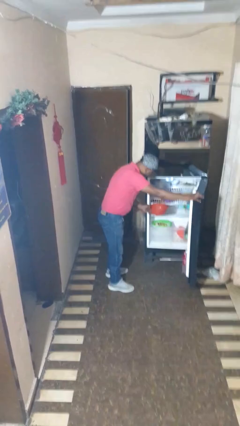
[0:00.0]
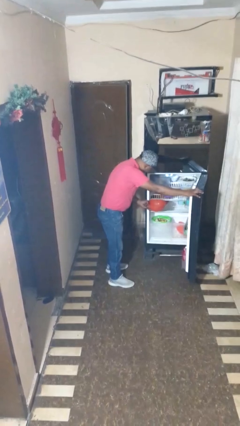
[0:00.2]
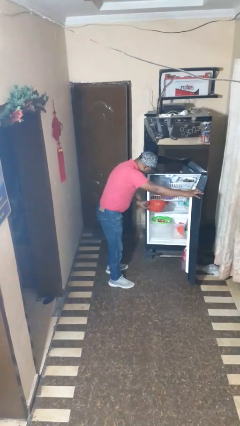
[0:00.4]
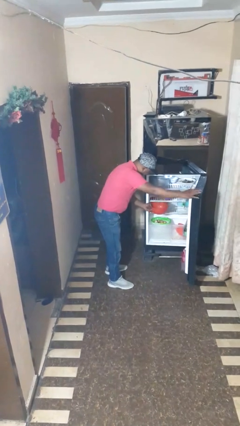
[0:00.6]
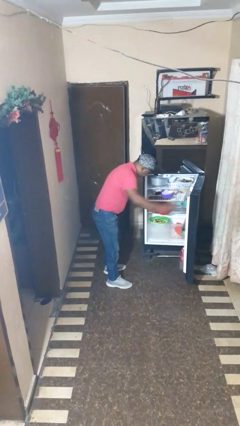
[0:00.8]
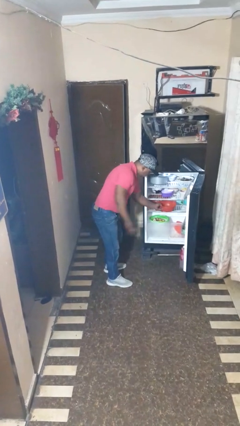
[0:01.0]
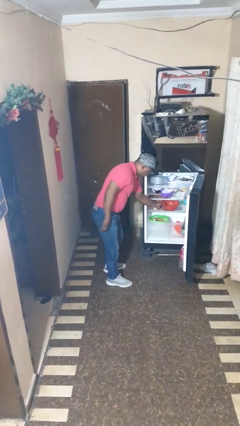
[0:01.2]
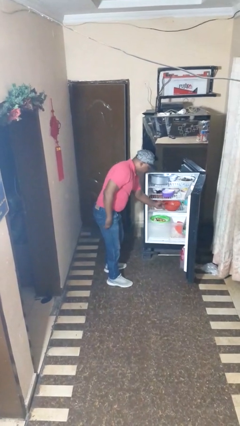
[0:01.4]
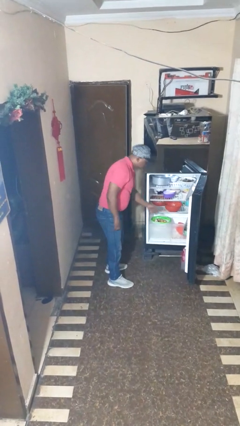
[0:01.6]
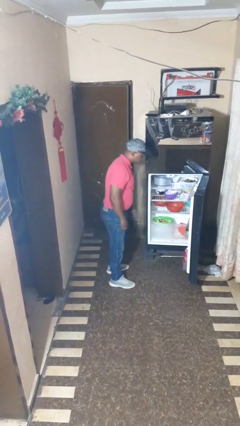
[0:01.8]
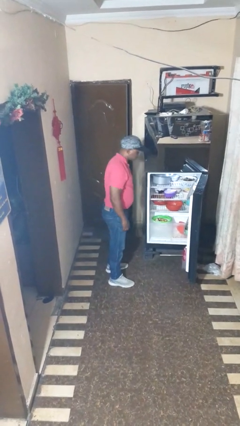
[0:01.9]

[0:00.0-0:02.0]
person puts object into refrigerator

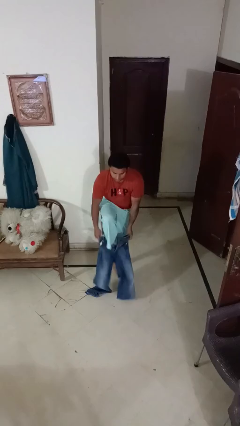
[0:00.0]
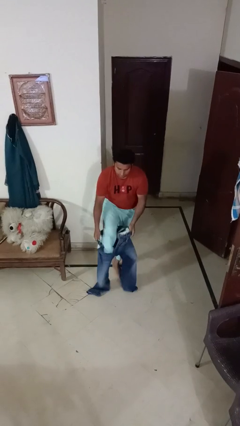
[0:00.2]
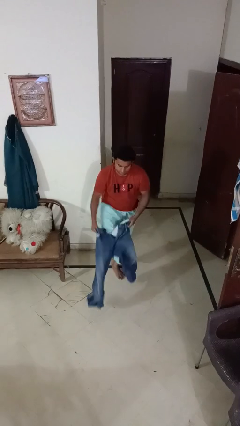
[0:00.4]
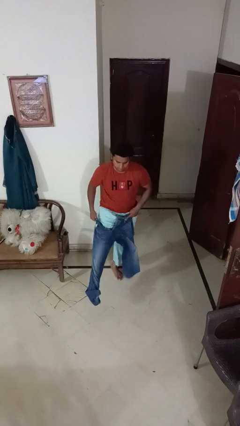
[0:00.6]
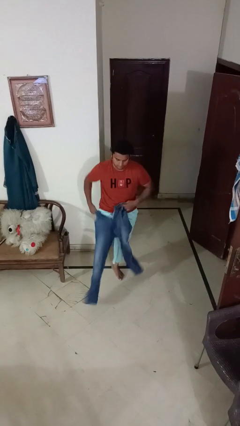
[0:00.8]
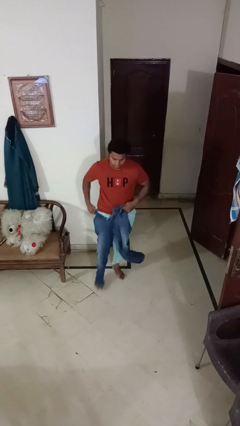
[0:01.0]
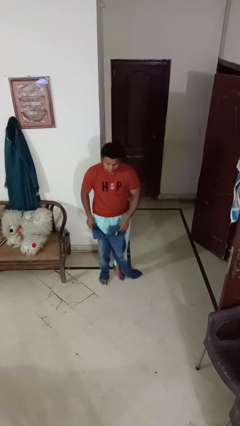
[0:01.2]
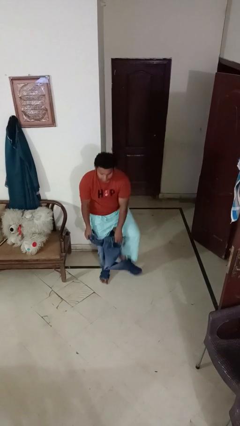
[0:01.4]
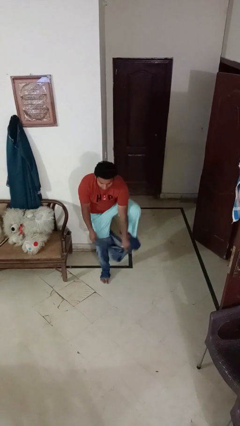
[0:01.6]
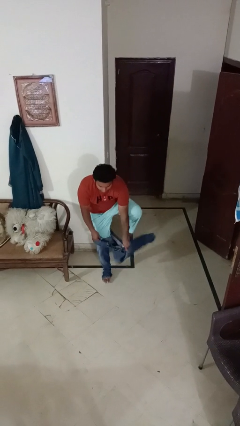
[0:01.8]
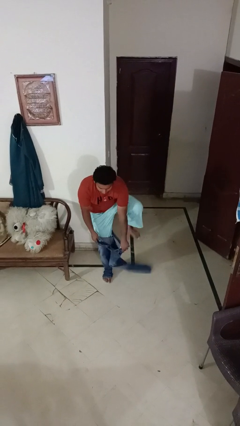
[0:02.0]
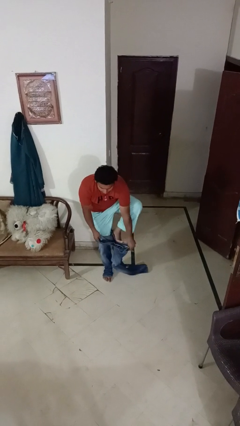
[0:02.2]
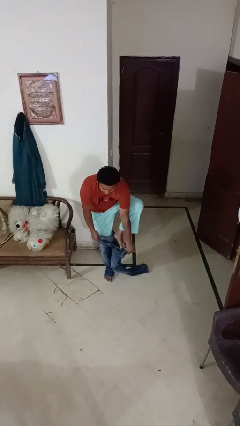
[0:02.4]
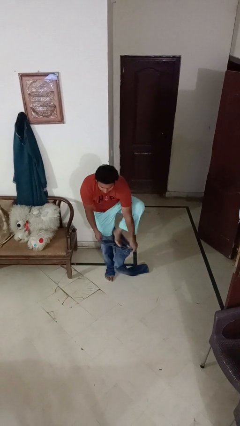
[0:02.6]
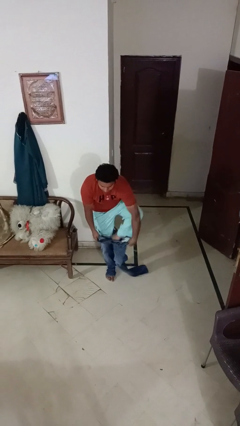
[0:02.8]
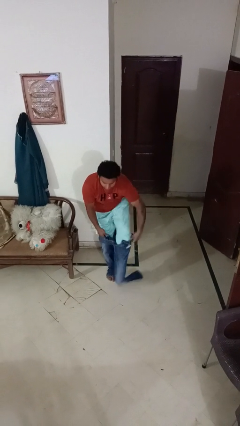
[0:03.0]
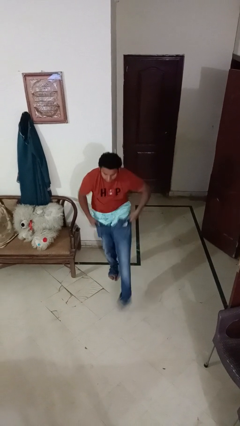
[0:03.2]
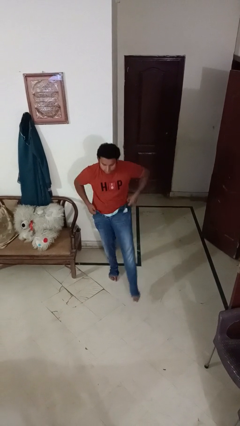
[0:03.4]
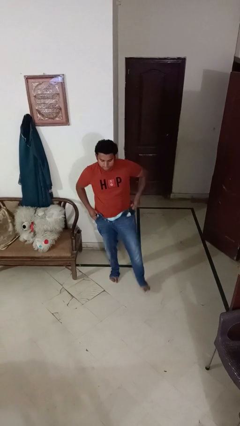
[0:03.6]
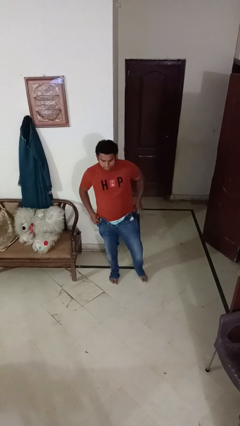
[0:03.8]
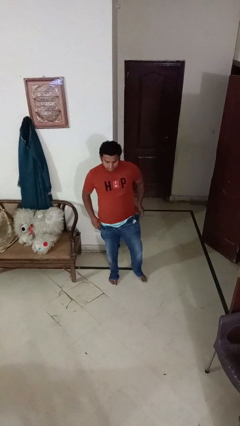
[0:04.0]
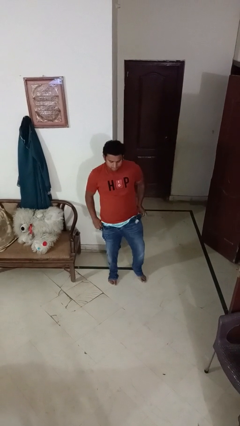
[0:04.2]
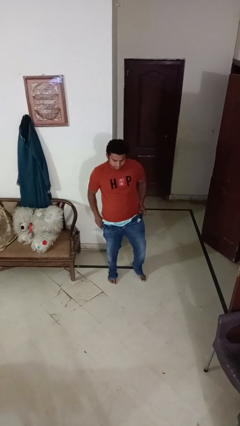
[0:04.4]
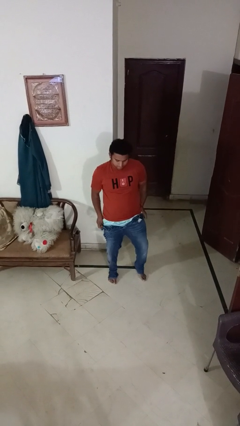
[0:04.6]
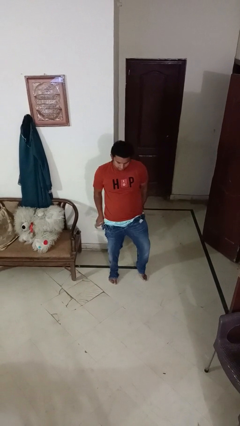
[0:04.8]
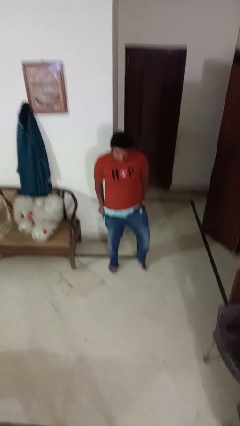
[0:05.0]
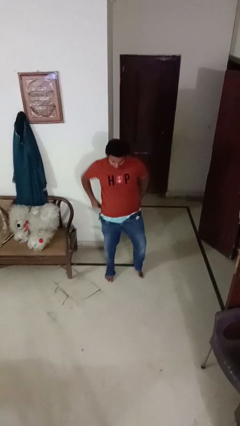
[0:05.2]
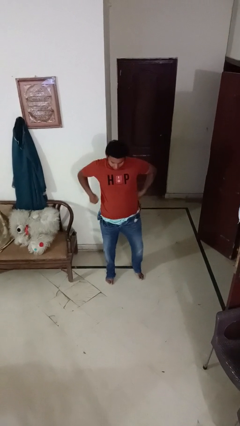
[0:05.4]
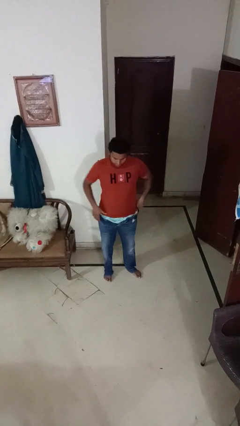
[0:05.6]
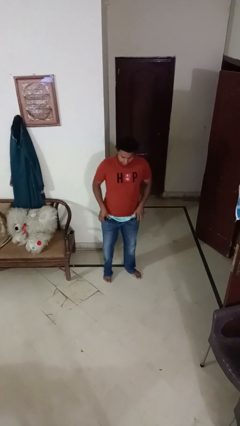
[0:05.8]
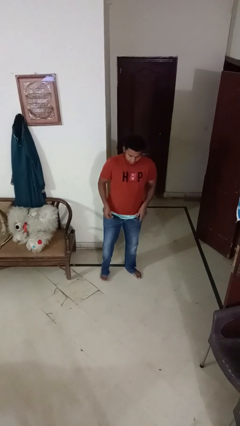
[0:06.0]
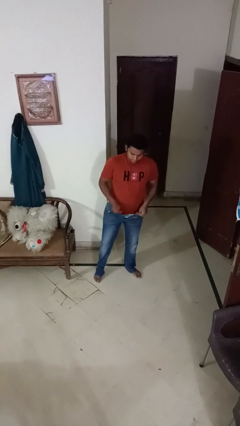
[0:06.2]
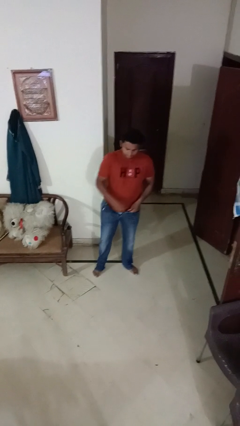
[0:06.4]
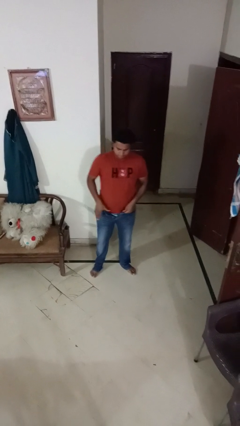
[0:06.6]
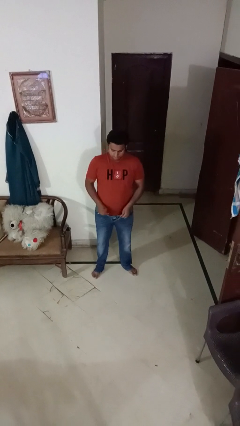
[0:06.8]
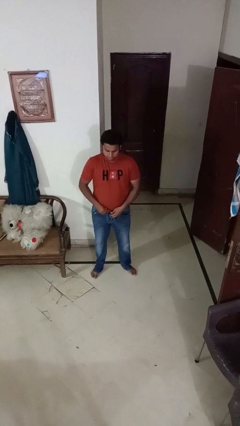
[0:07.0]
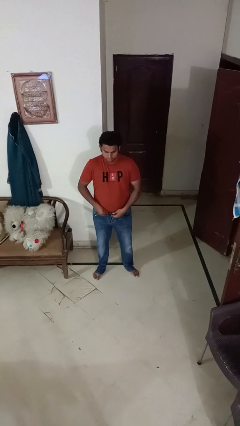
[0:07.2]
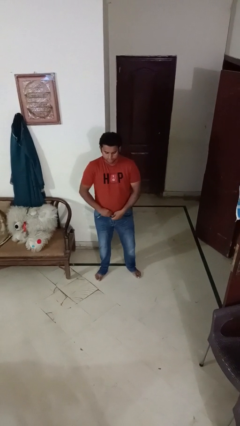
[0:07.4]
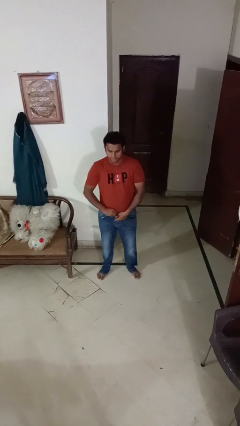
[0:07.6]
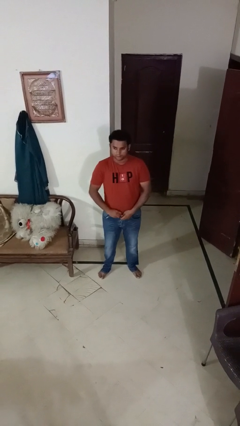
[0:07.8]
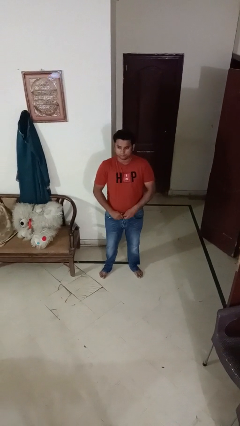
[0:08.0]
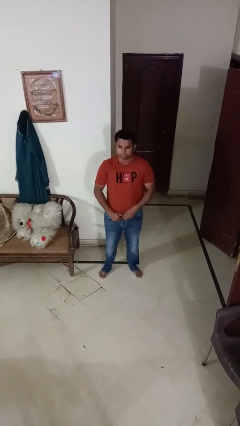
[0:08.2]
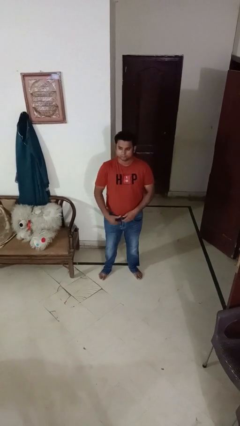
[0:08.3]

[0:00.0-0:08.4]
person puts on pants

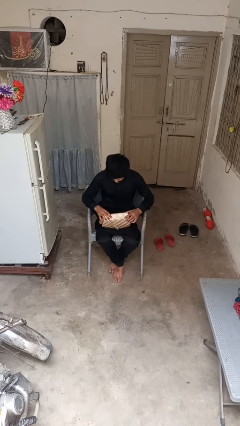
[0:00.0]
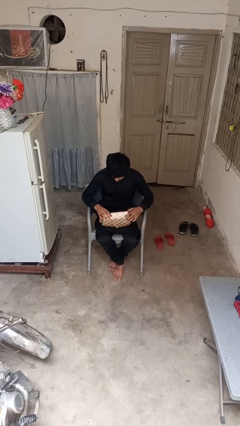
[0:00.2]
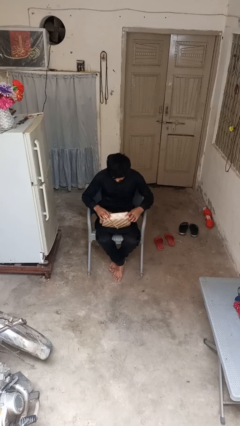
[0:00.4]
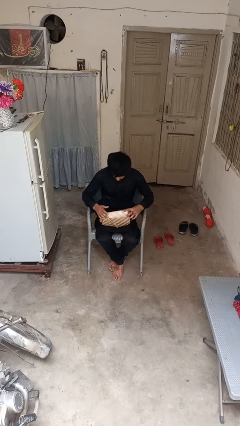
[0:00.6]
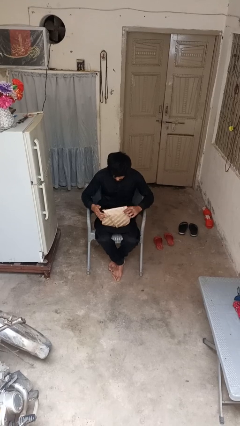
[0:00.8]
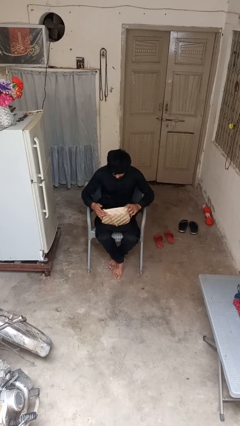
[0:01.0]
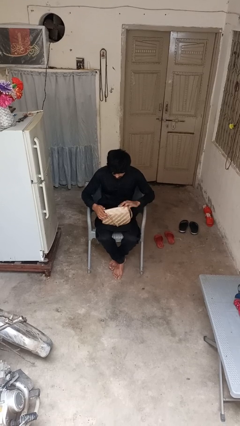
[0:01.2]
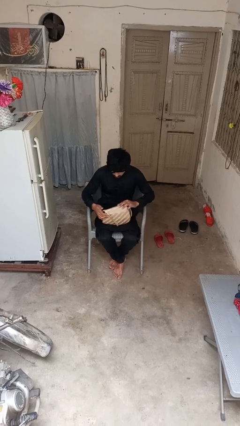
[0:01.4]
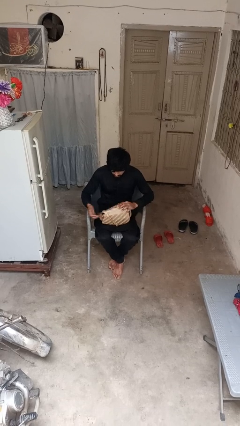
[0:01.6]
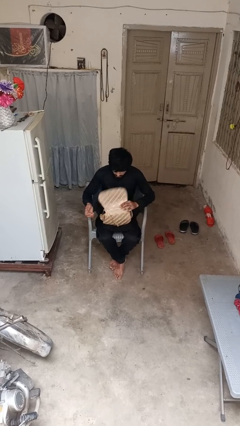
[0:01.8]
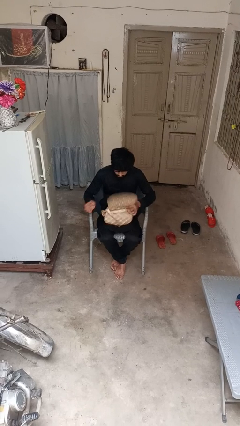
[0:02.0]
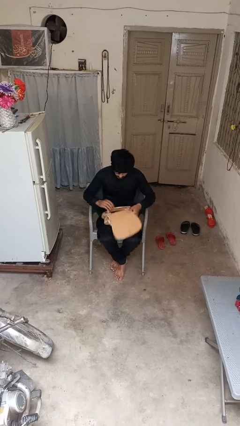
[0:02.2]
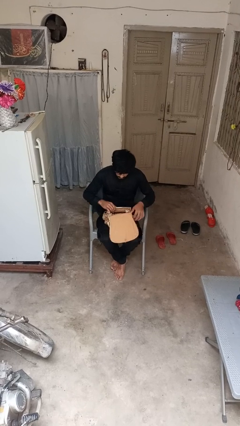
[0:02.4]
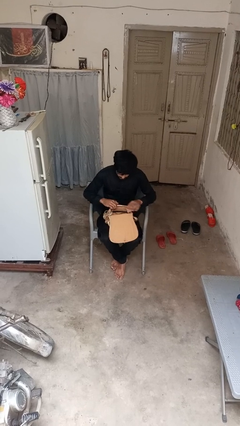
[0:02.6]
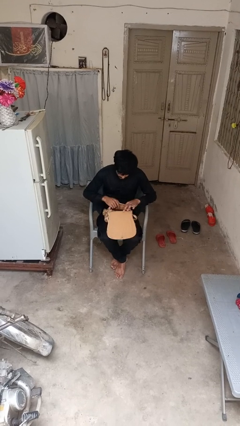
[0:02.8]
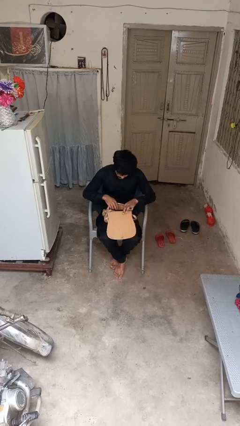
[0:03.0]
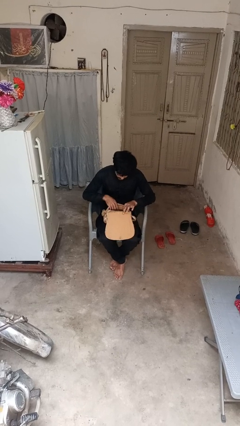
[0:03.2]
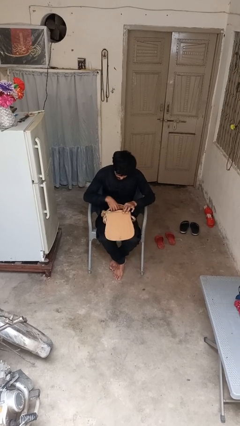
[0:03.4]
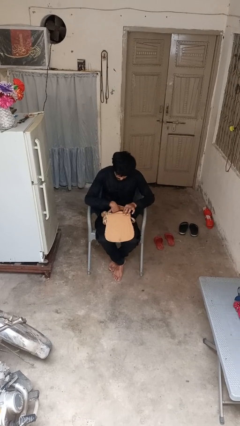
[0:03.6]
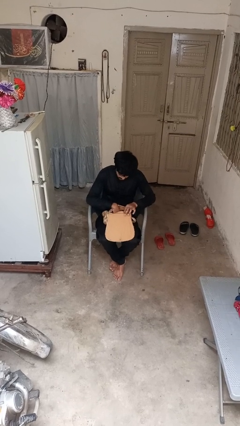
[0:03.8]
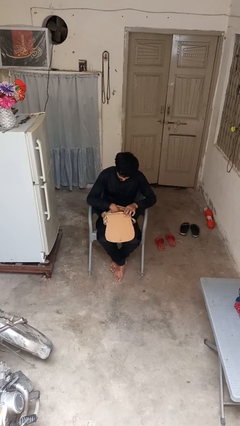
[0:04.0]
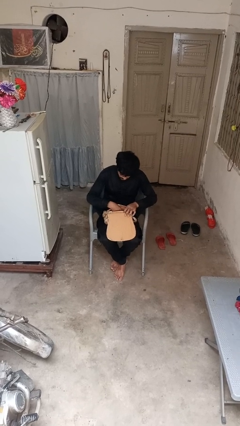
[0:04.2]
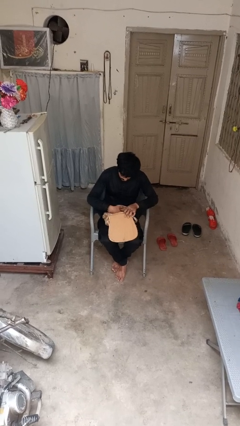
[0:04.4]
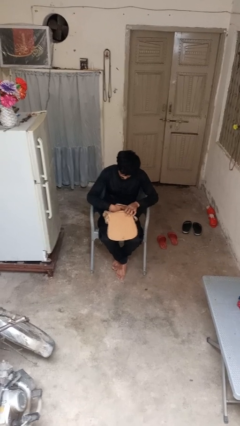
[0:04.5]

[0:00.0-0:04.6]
person searches in purse

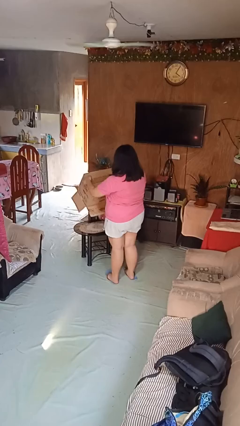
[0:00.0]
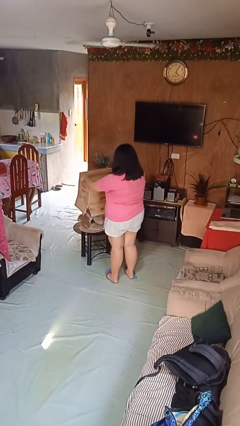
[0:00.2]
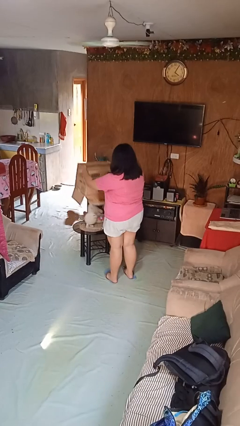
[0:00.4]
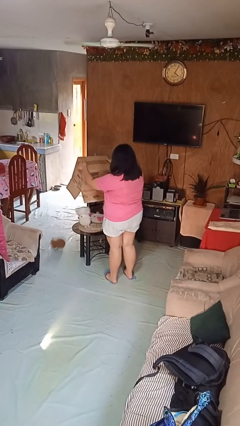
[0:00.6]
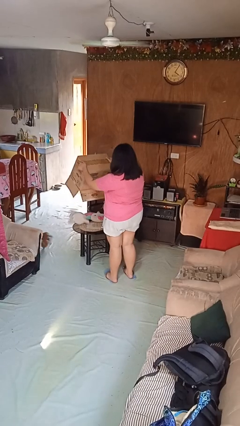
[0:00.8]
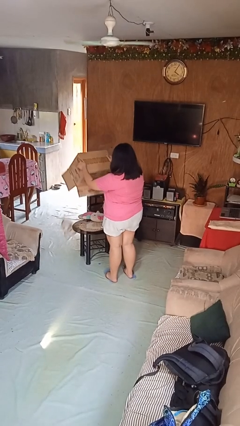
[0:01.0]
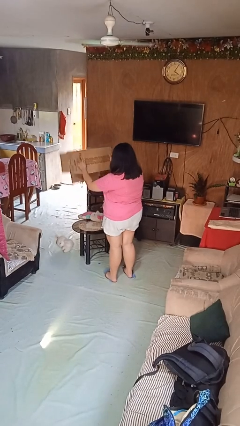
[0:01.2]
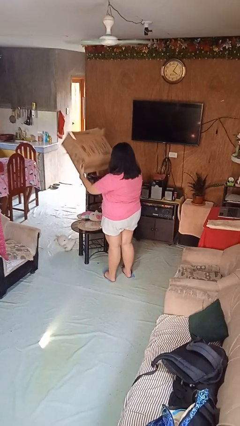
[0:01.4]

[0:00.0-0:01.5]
person unloads box onto table

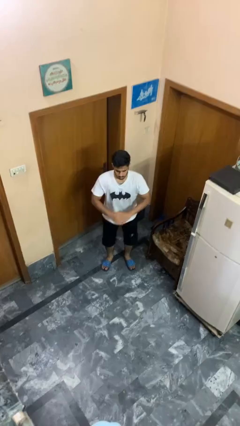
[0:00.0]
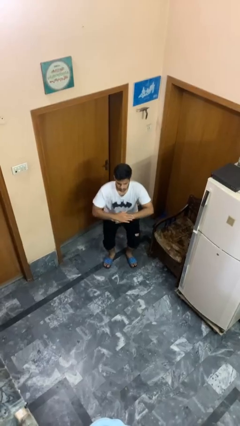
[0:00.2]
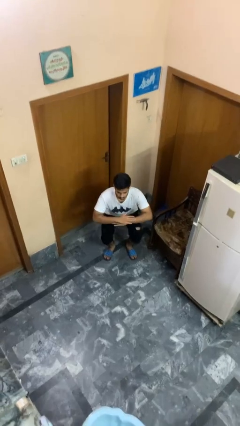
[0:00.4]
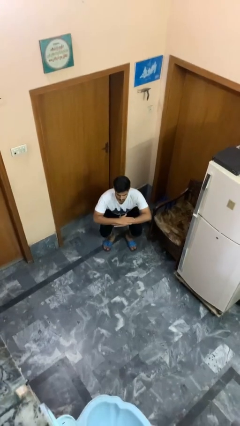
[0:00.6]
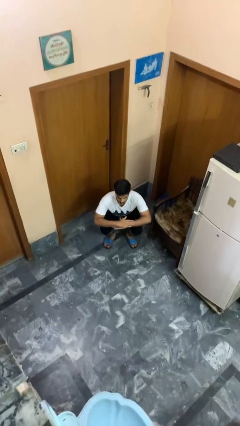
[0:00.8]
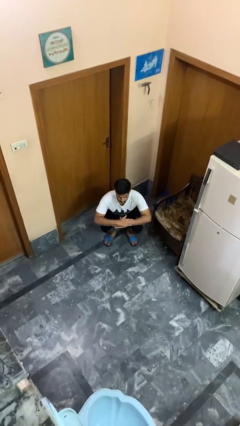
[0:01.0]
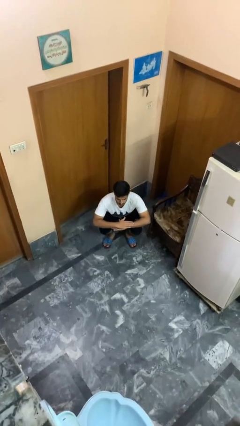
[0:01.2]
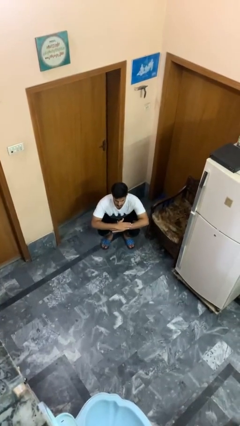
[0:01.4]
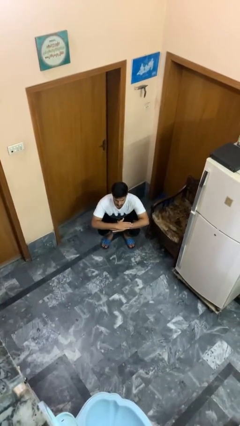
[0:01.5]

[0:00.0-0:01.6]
person squats
